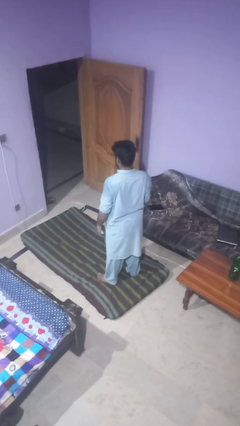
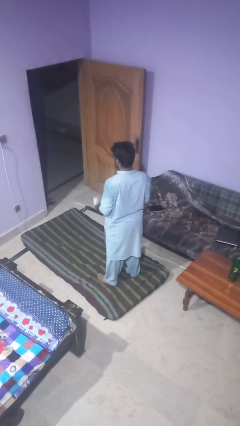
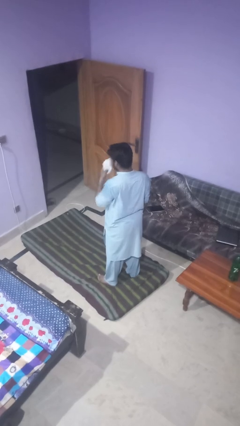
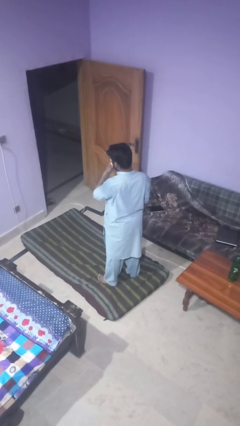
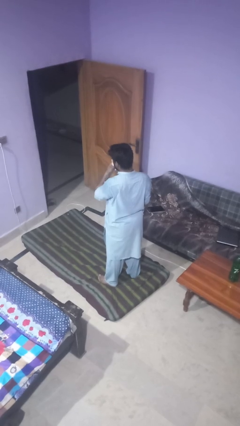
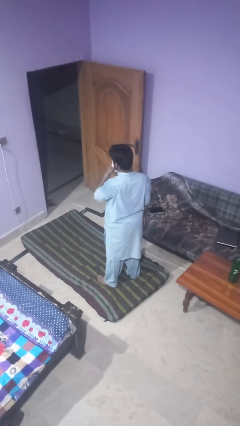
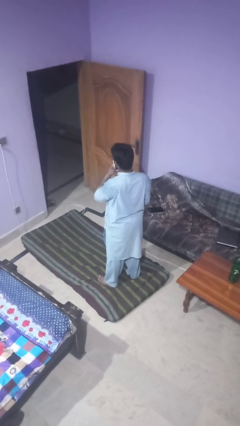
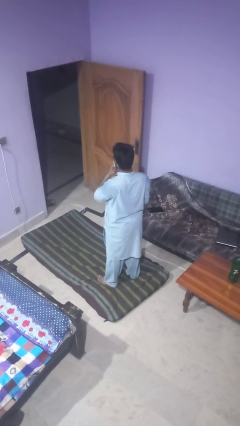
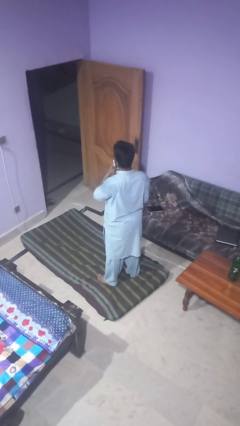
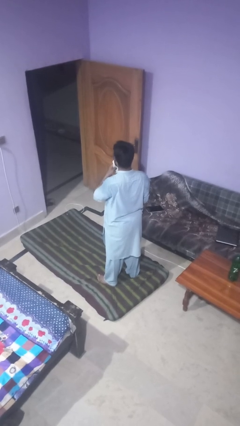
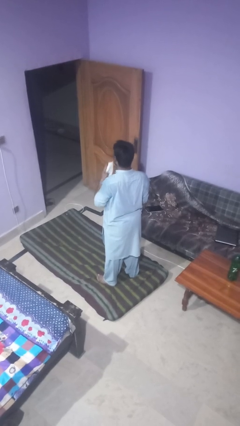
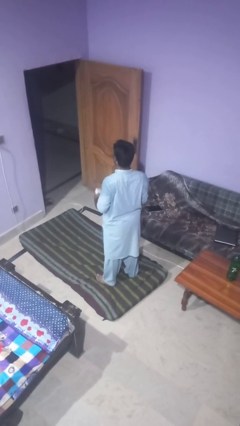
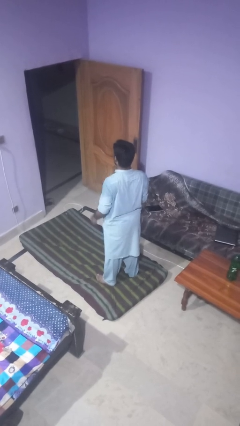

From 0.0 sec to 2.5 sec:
person wipes mouth with napkin

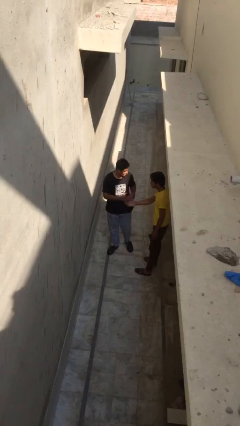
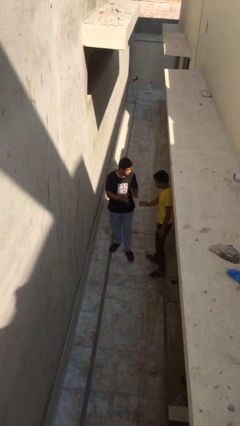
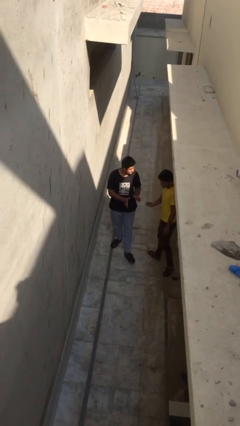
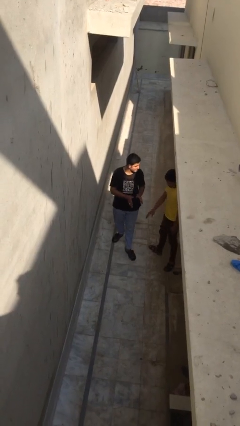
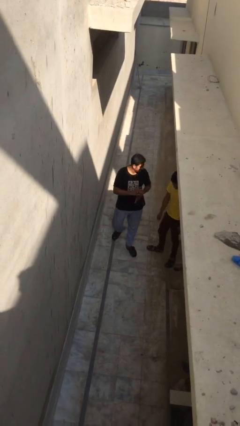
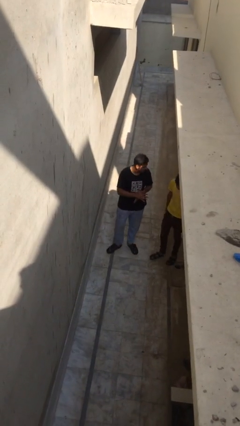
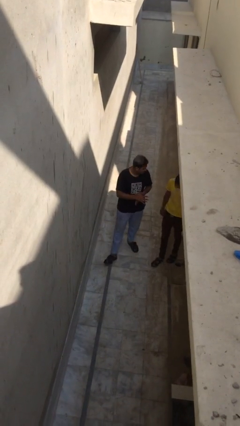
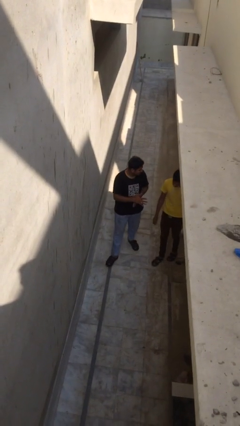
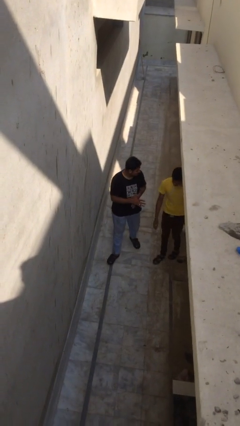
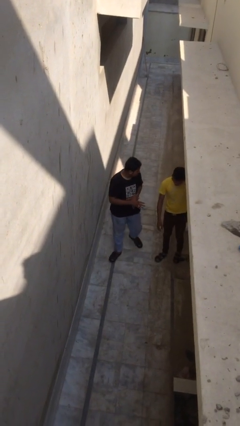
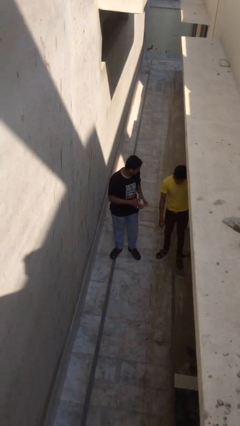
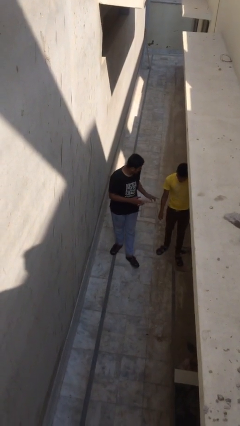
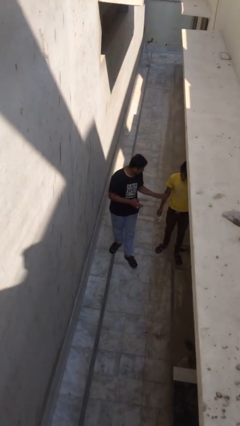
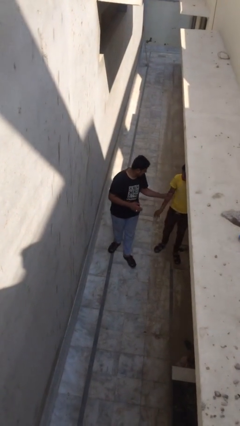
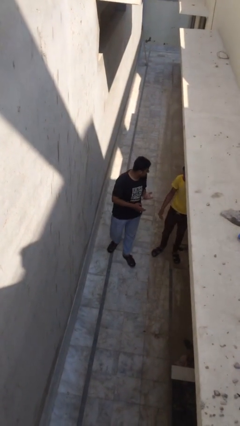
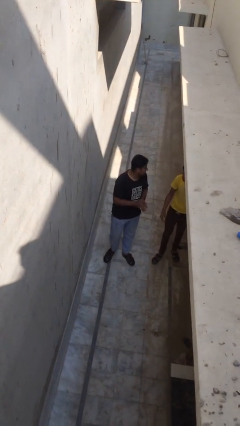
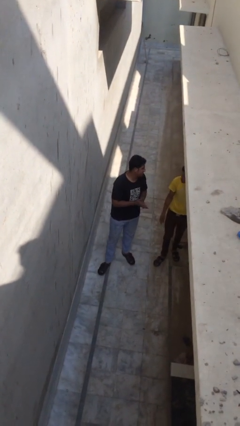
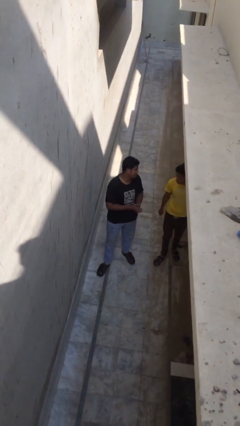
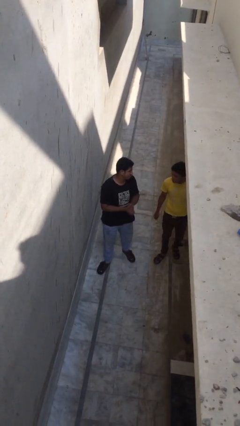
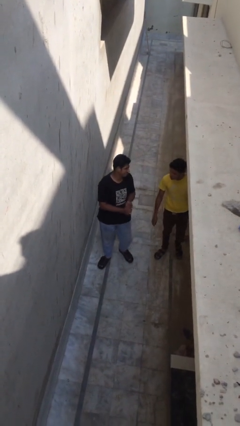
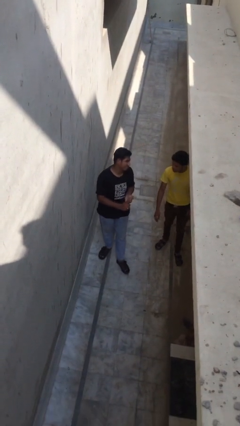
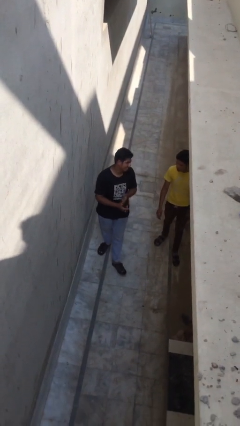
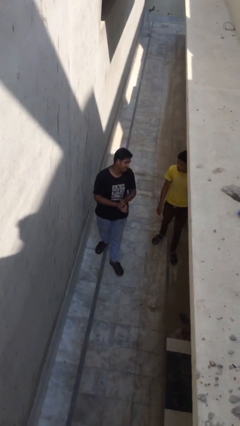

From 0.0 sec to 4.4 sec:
person talks to person

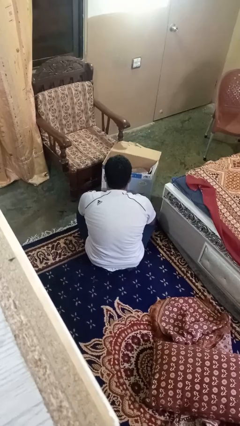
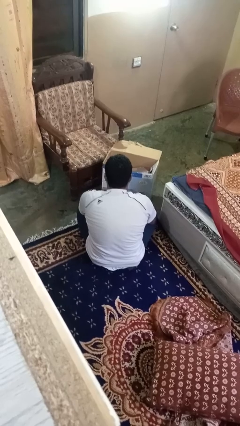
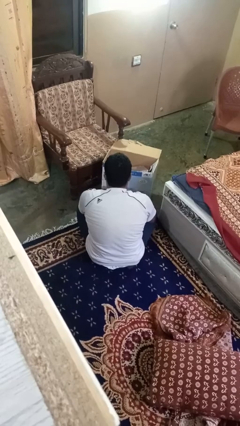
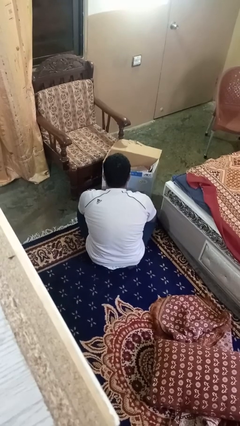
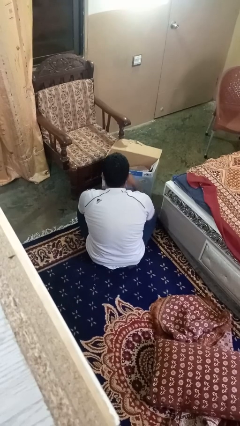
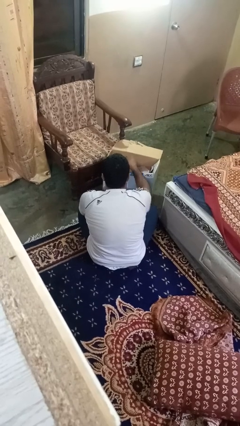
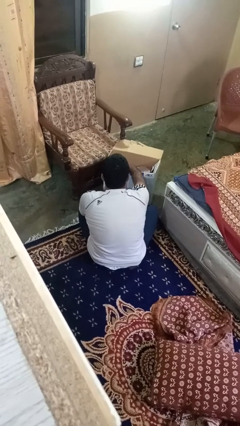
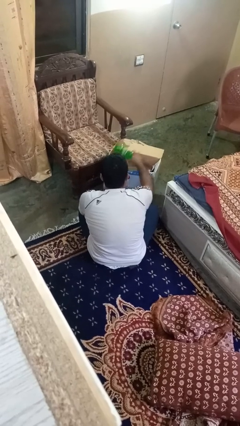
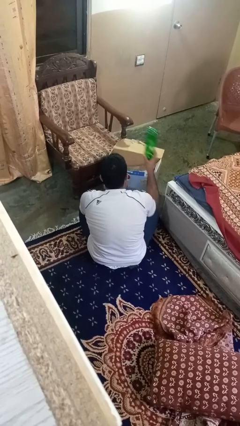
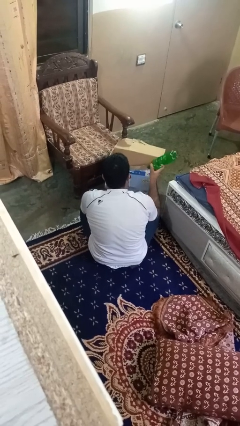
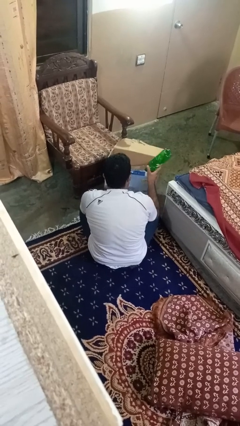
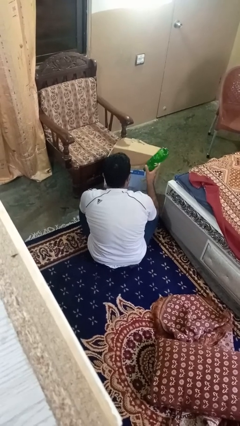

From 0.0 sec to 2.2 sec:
person takes object from box

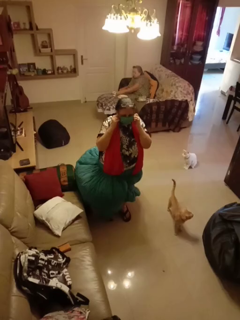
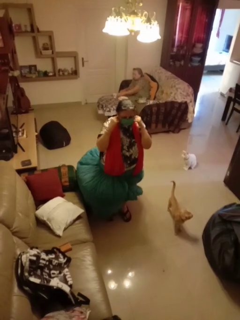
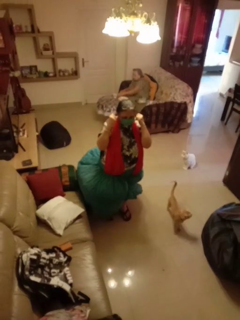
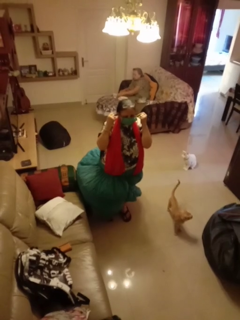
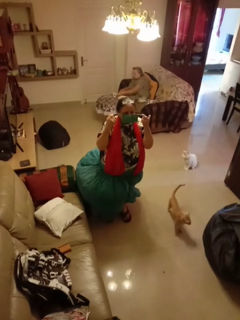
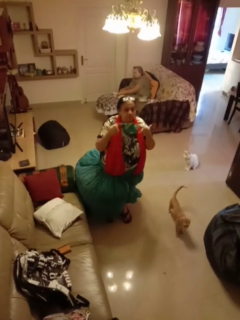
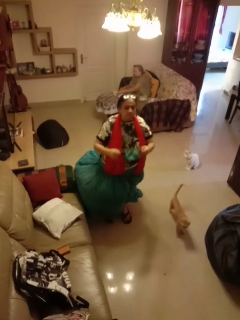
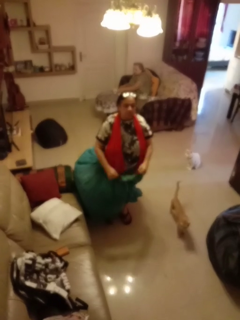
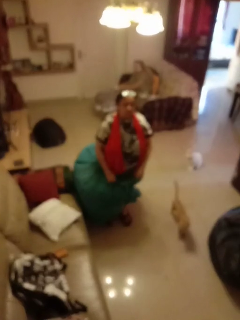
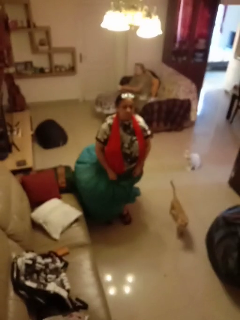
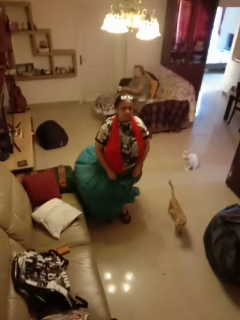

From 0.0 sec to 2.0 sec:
person takes off facemask

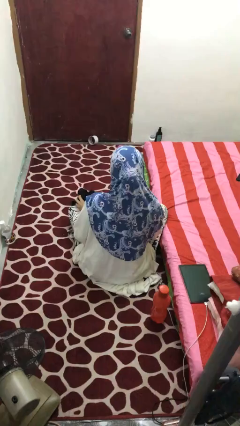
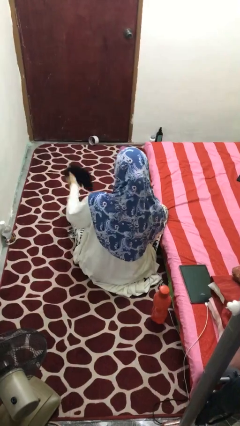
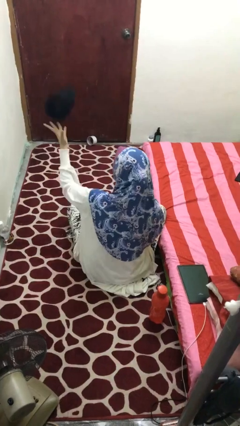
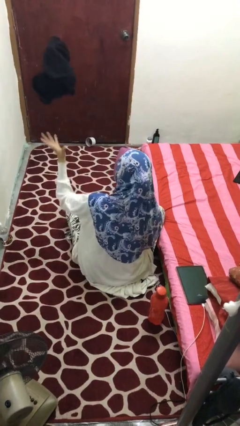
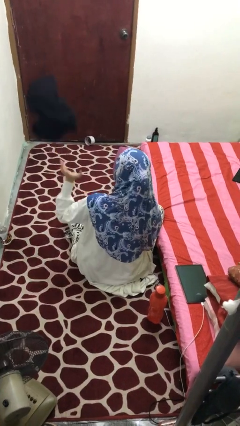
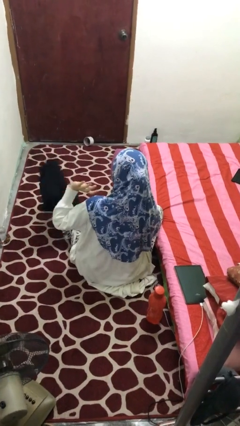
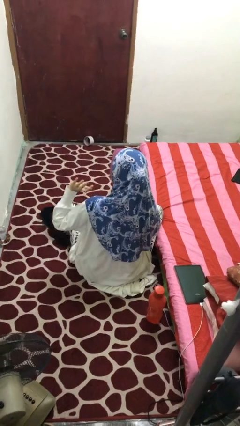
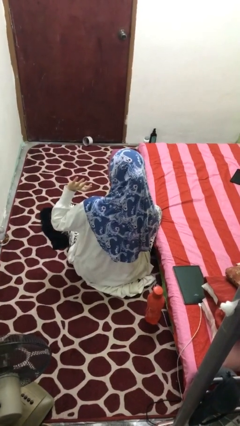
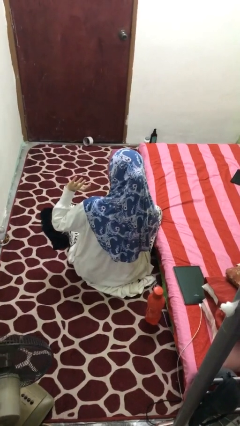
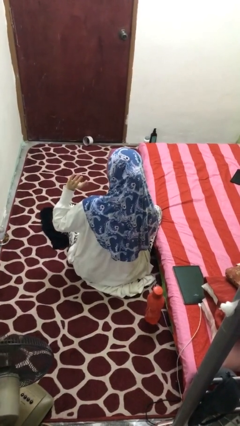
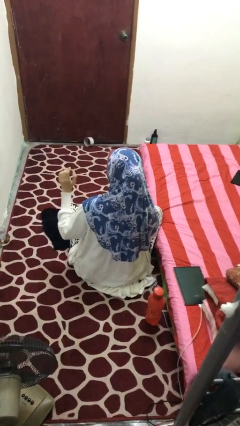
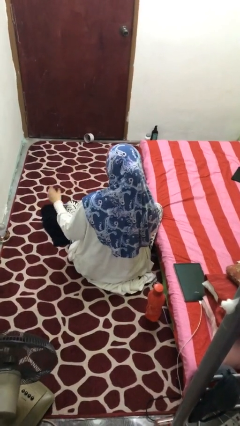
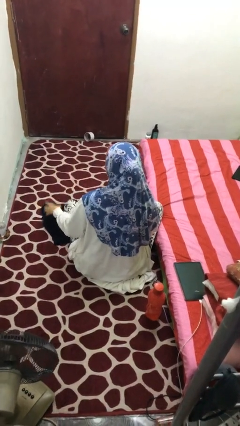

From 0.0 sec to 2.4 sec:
person throws object into air

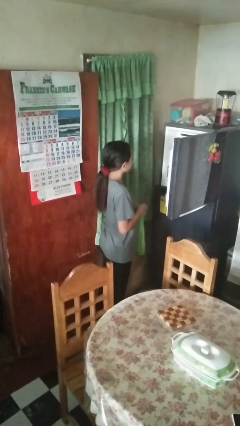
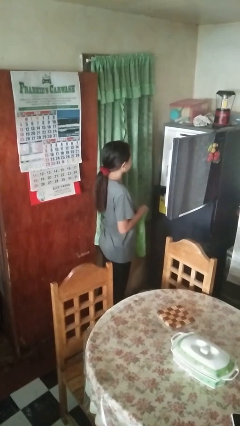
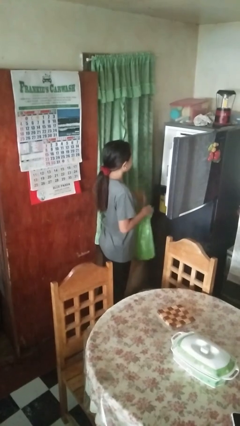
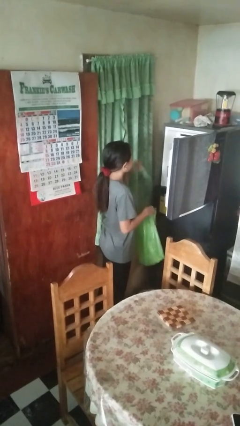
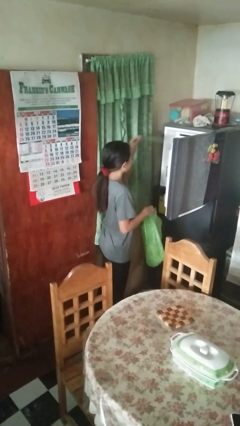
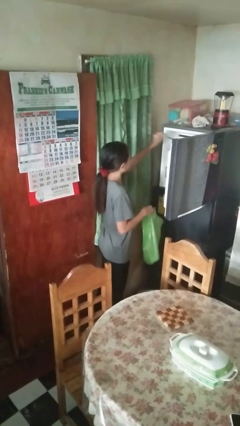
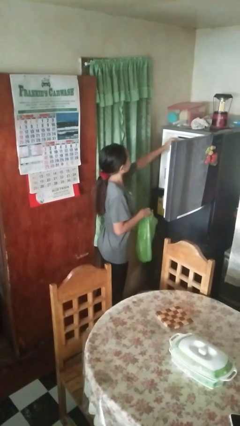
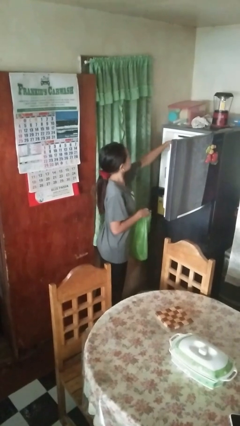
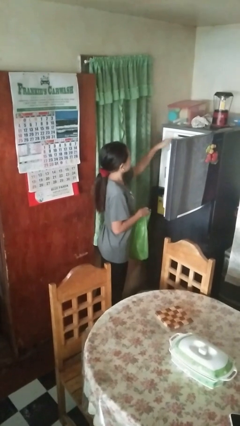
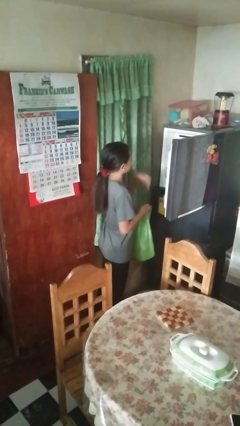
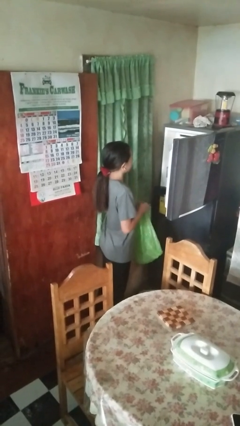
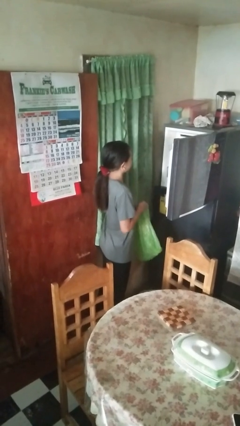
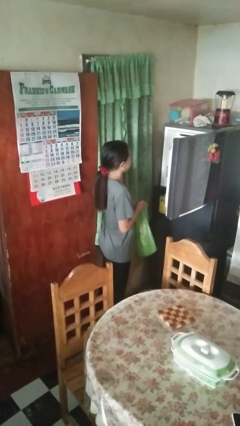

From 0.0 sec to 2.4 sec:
person loads groceries into refrigerator

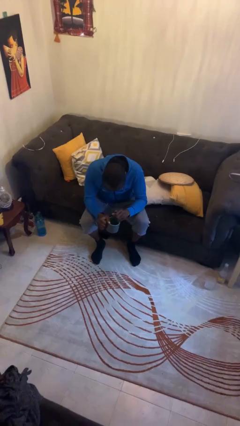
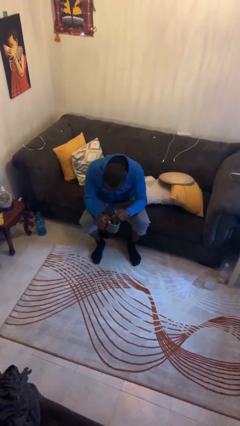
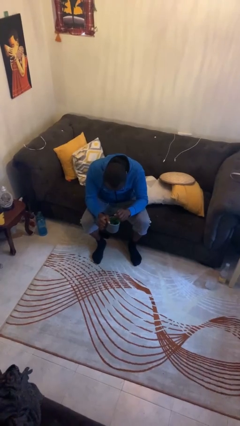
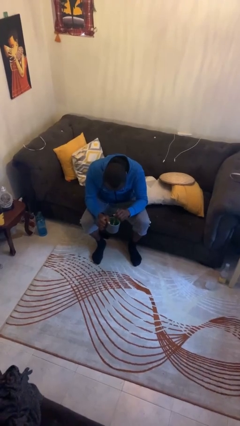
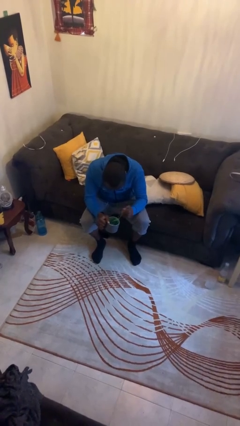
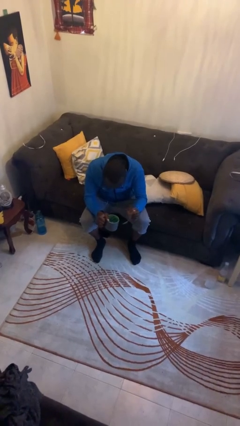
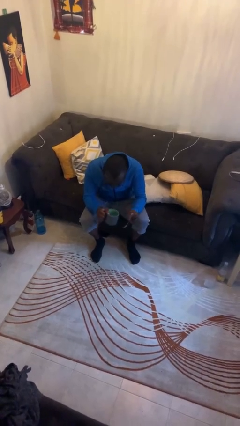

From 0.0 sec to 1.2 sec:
person stirs mug

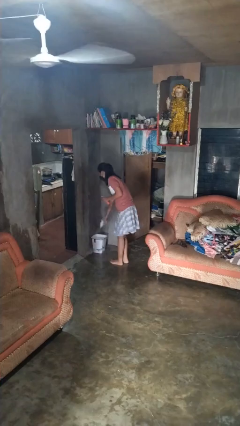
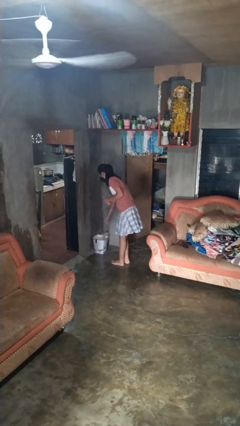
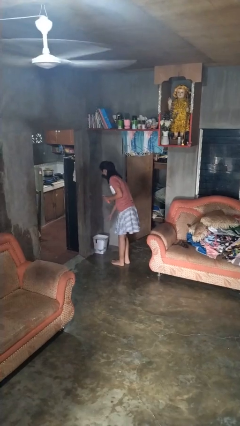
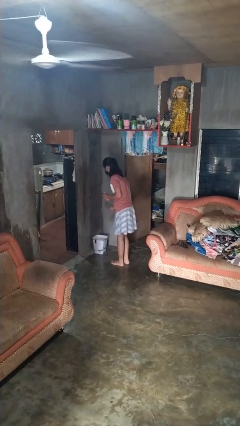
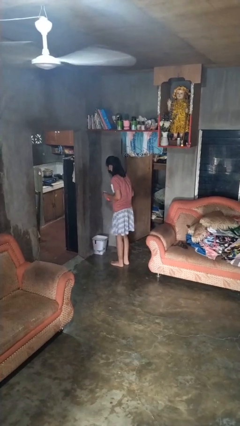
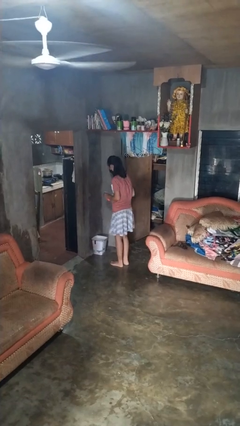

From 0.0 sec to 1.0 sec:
person discards trash
